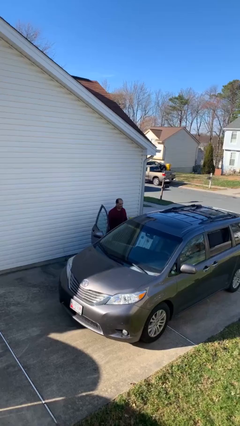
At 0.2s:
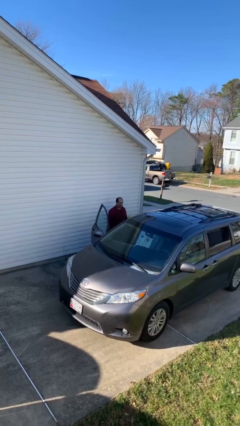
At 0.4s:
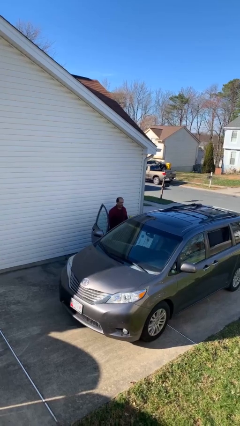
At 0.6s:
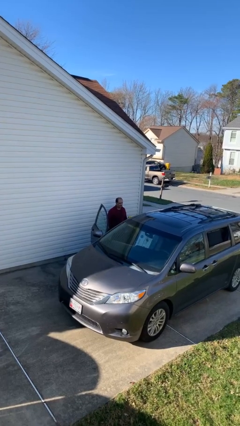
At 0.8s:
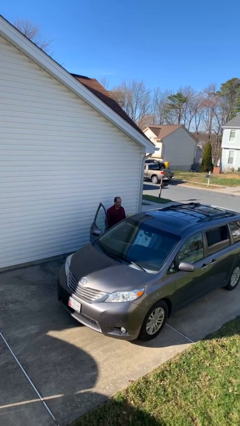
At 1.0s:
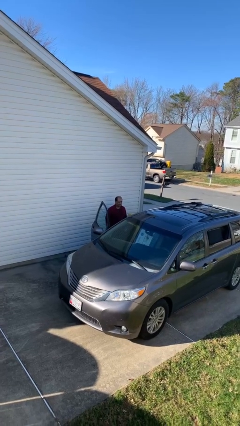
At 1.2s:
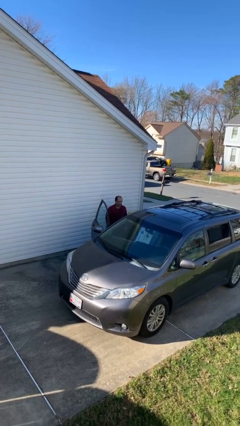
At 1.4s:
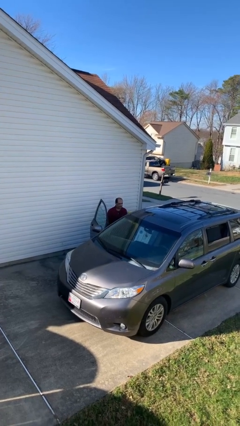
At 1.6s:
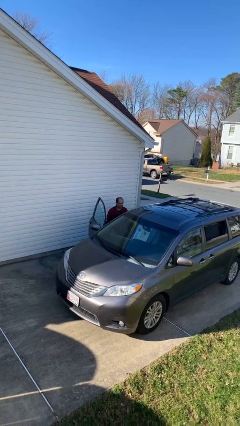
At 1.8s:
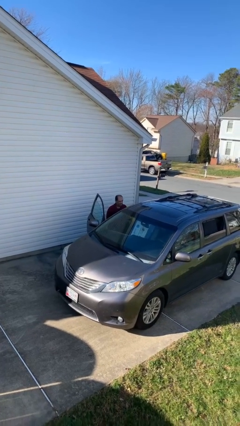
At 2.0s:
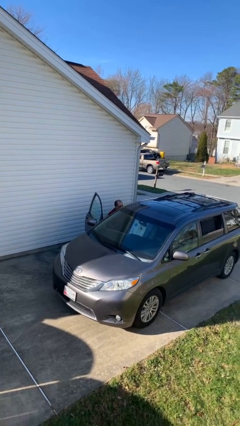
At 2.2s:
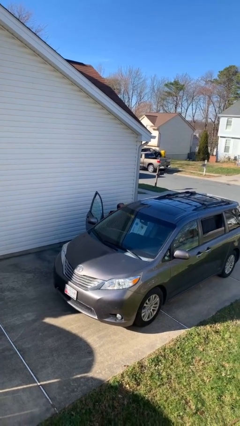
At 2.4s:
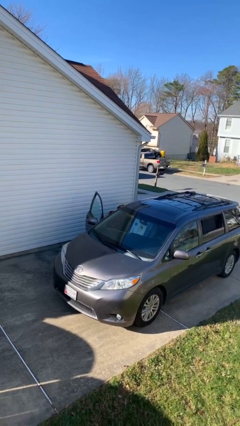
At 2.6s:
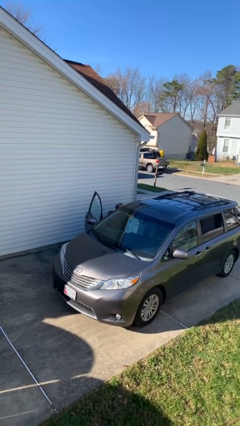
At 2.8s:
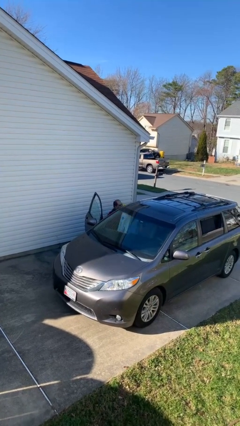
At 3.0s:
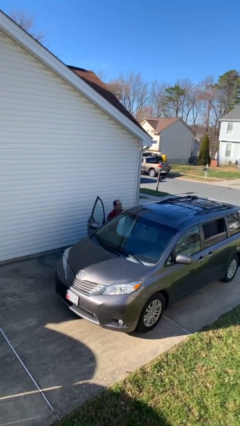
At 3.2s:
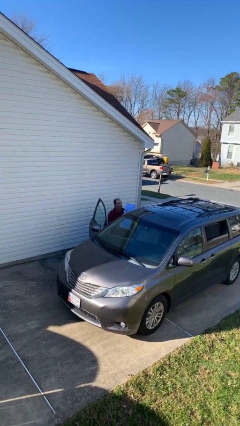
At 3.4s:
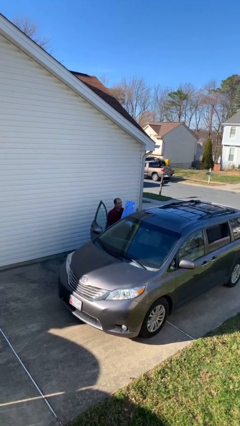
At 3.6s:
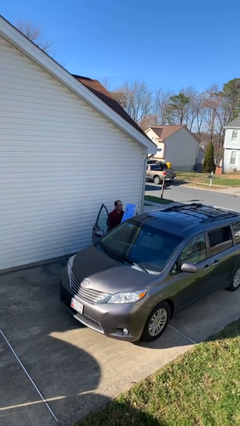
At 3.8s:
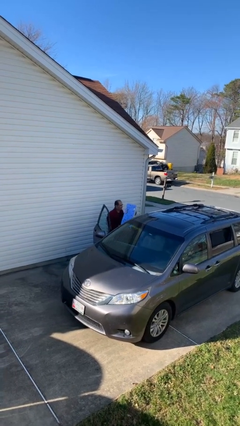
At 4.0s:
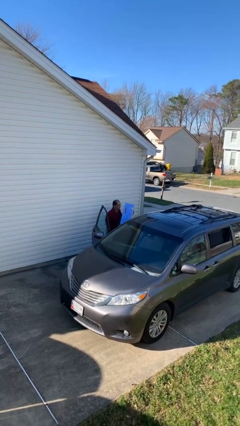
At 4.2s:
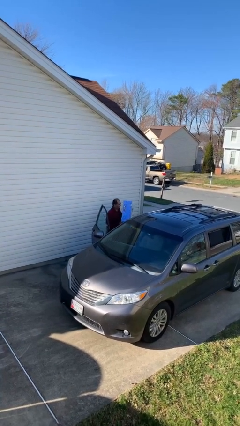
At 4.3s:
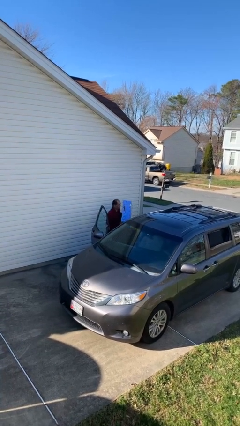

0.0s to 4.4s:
person unloads car

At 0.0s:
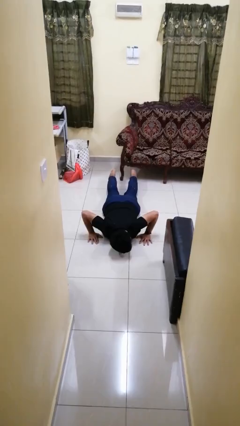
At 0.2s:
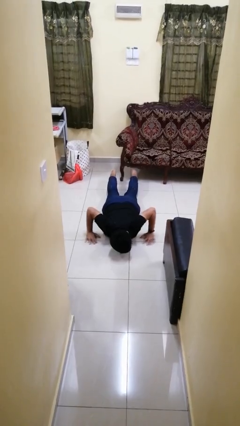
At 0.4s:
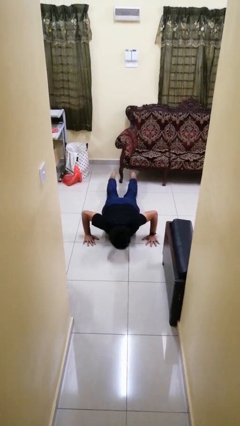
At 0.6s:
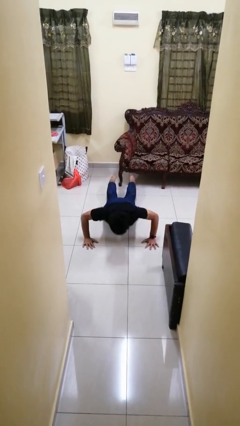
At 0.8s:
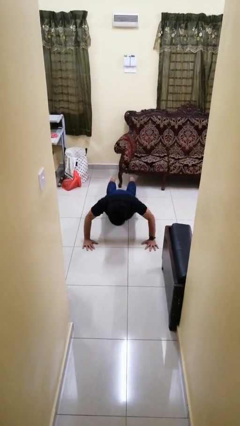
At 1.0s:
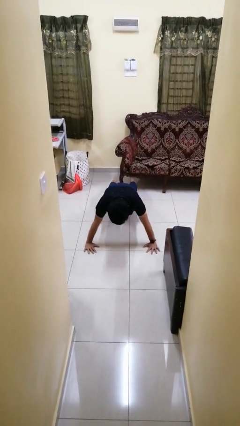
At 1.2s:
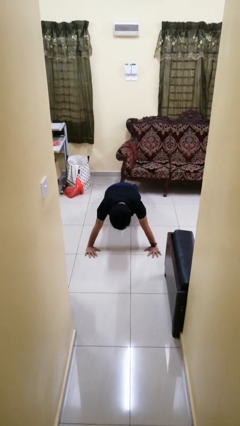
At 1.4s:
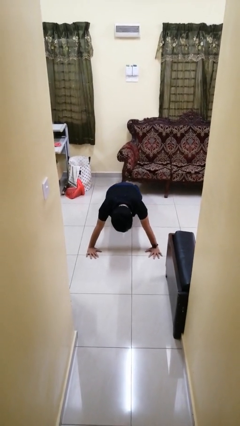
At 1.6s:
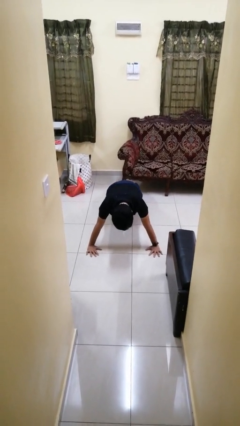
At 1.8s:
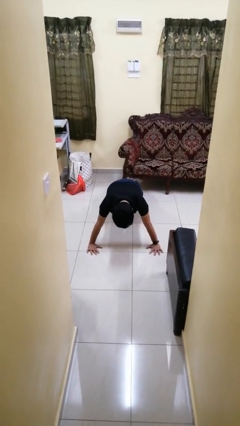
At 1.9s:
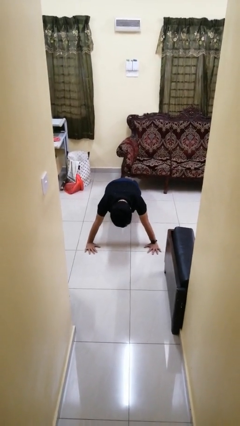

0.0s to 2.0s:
person exercises with pushup

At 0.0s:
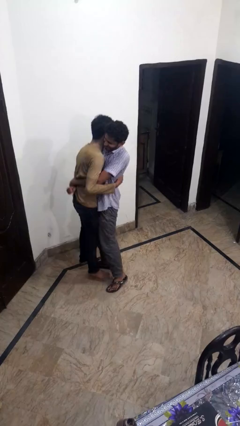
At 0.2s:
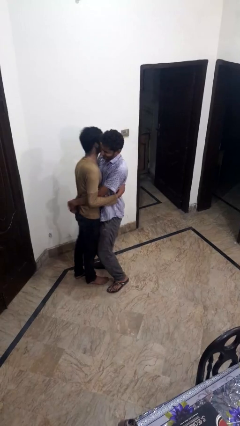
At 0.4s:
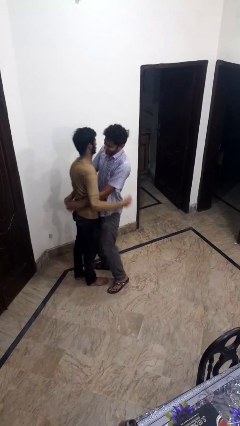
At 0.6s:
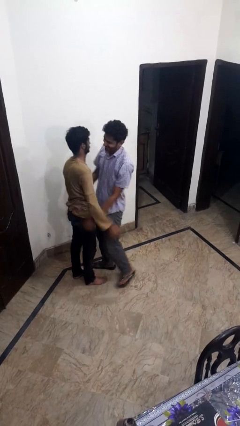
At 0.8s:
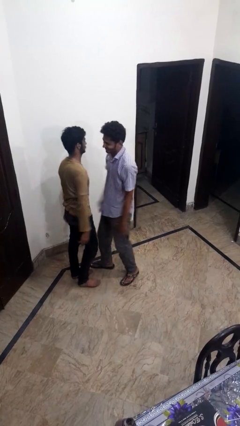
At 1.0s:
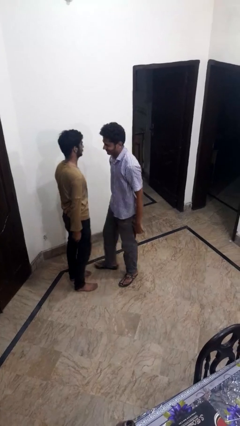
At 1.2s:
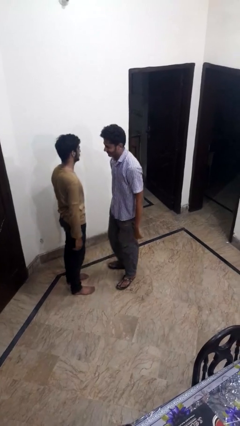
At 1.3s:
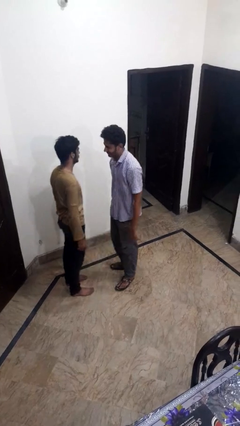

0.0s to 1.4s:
person puts down person

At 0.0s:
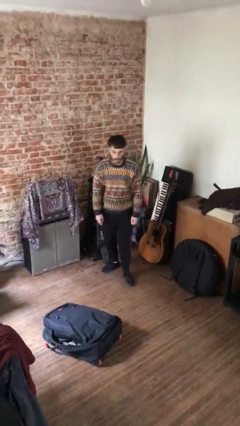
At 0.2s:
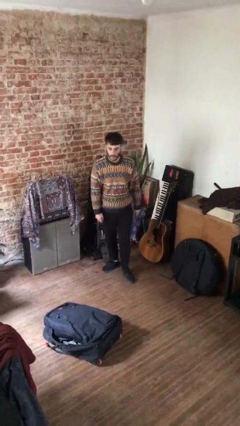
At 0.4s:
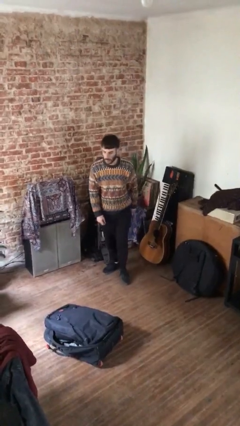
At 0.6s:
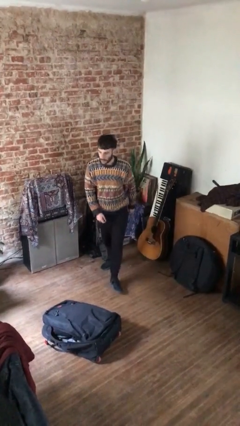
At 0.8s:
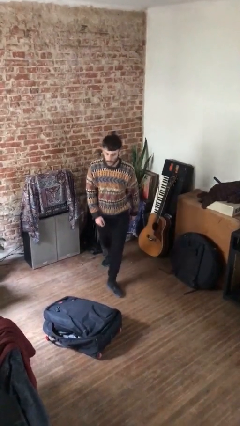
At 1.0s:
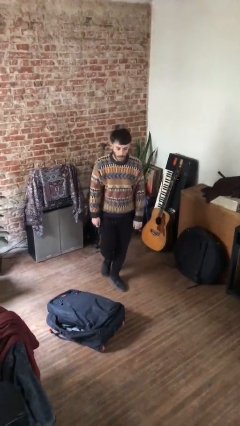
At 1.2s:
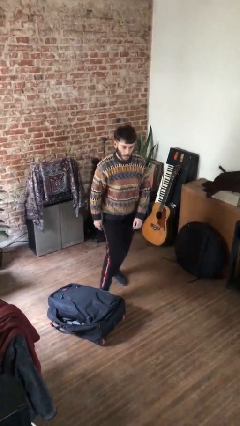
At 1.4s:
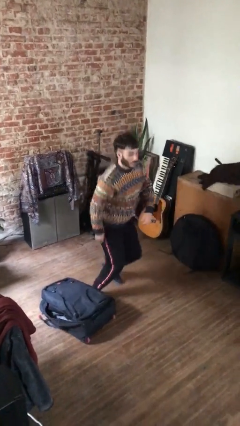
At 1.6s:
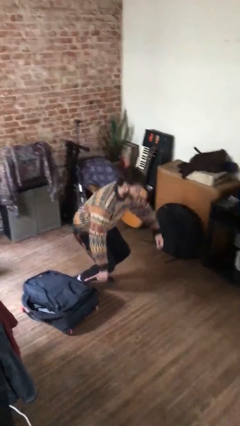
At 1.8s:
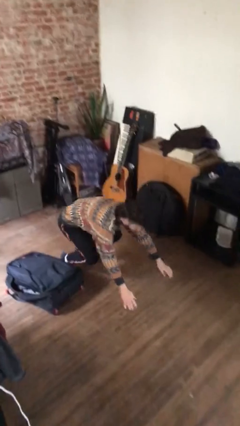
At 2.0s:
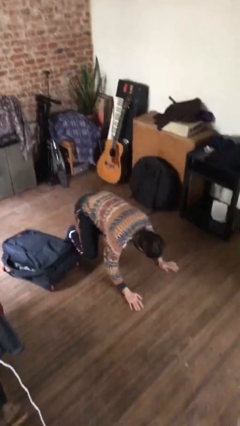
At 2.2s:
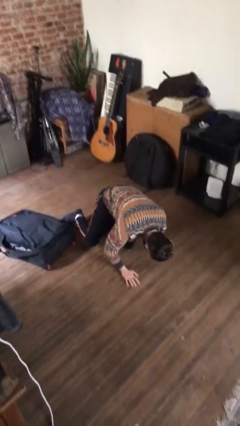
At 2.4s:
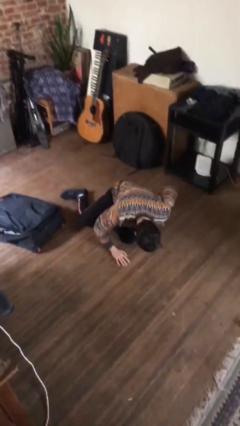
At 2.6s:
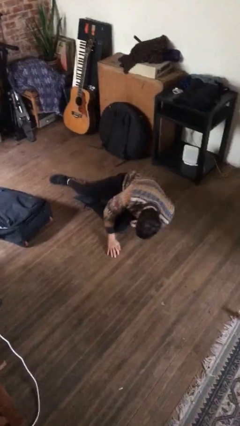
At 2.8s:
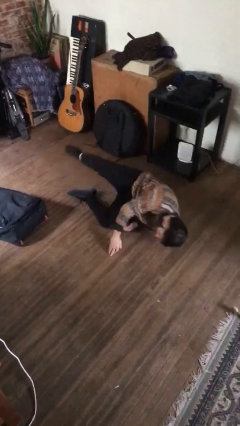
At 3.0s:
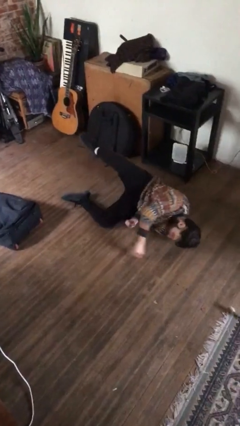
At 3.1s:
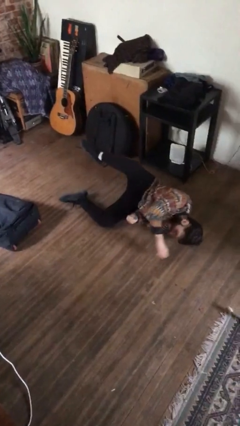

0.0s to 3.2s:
person trips on object on floor

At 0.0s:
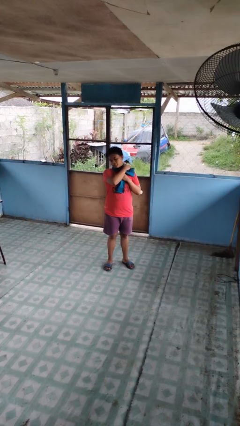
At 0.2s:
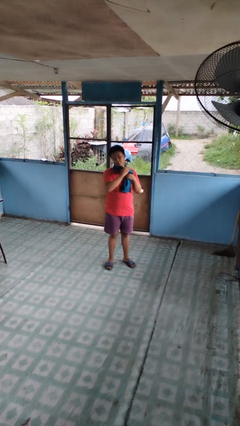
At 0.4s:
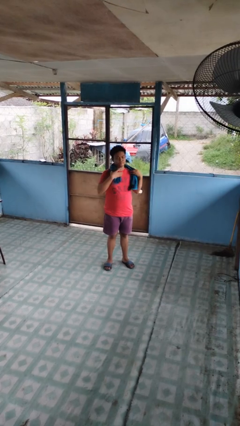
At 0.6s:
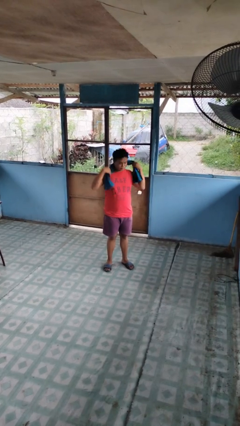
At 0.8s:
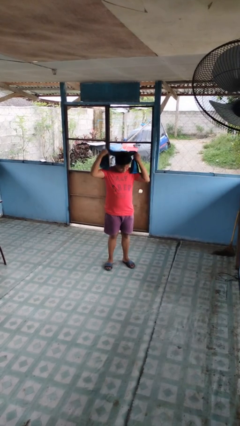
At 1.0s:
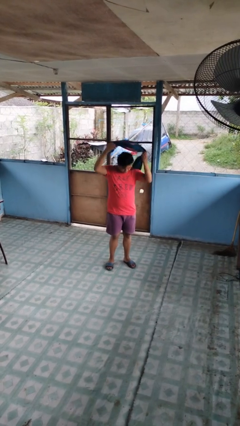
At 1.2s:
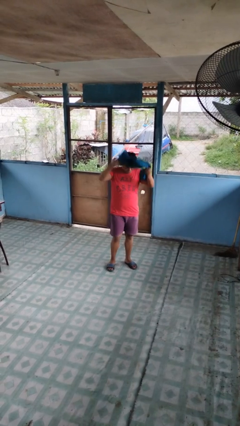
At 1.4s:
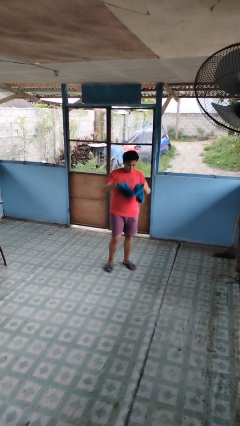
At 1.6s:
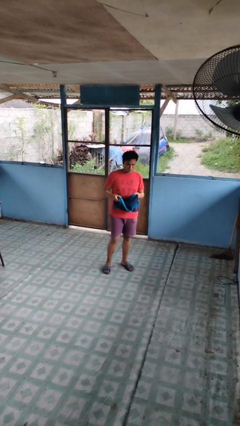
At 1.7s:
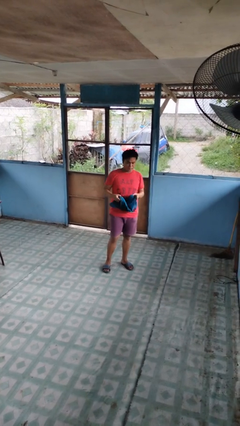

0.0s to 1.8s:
person takes off scarf

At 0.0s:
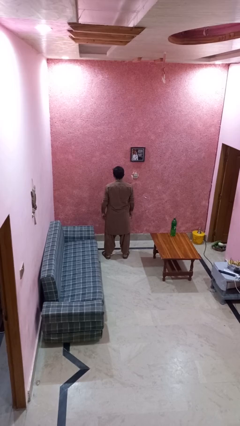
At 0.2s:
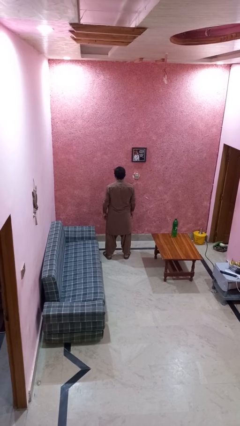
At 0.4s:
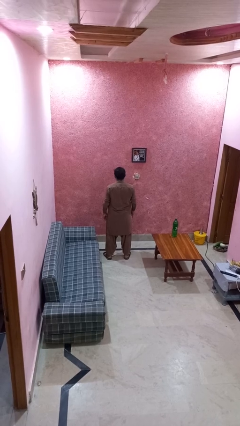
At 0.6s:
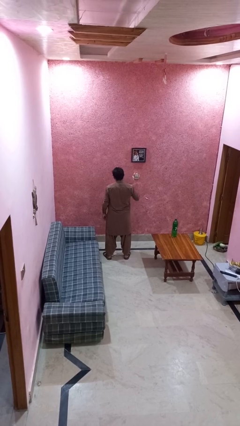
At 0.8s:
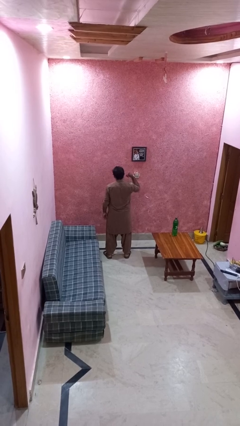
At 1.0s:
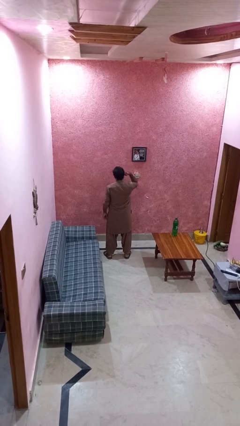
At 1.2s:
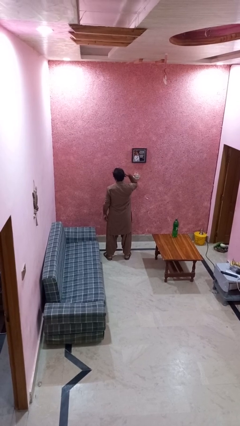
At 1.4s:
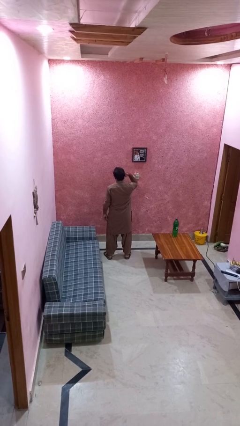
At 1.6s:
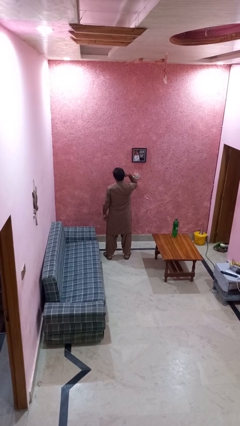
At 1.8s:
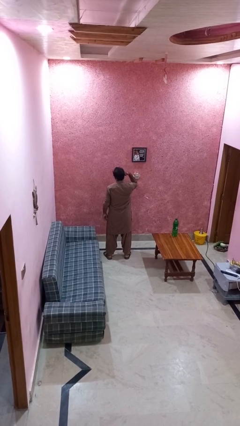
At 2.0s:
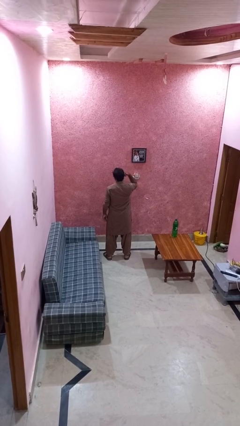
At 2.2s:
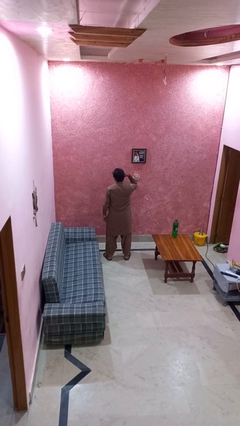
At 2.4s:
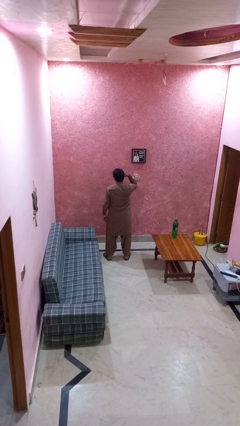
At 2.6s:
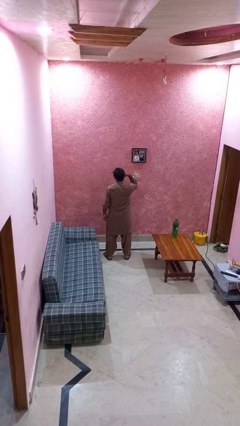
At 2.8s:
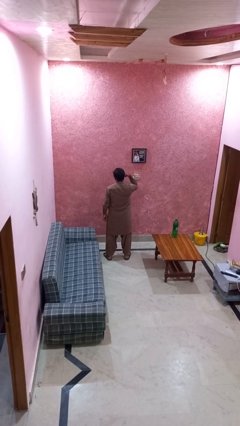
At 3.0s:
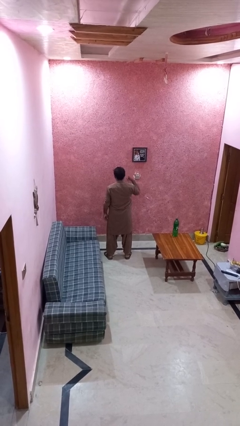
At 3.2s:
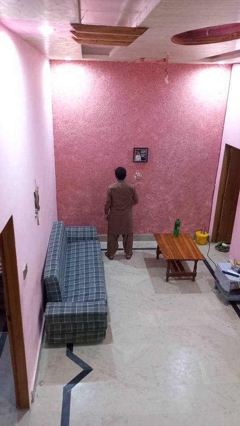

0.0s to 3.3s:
person gestures call me

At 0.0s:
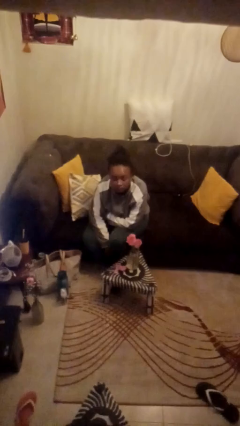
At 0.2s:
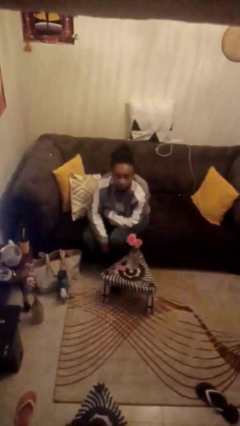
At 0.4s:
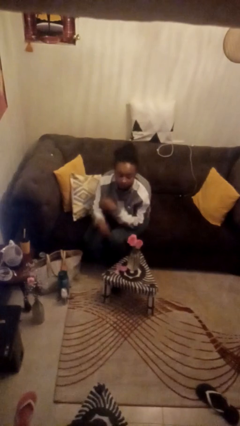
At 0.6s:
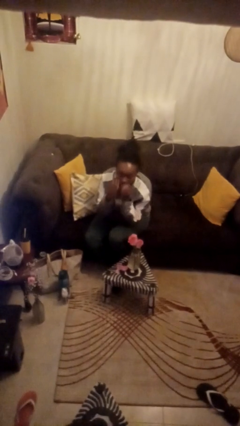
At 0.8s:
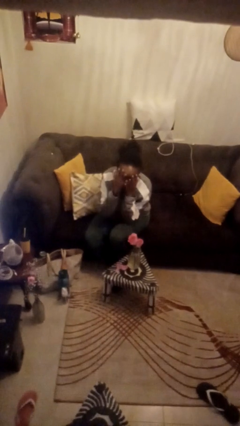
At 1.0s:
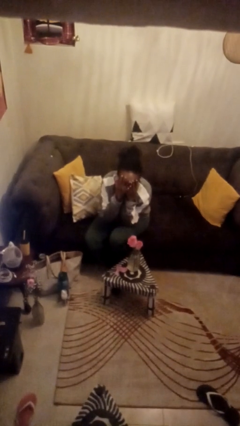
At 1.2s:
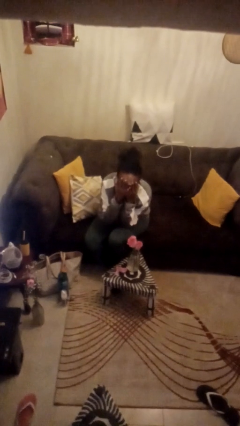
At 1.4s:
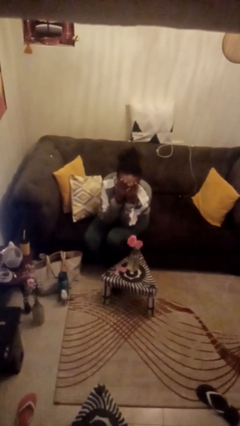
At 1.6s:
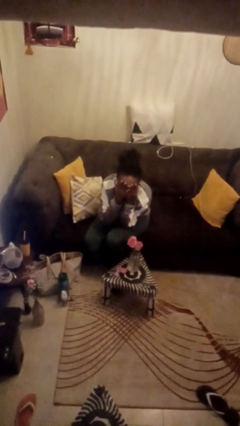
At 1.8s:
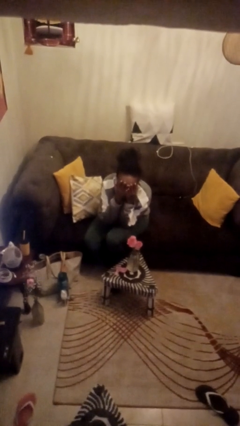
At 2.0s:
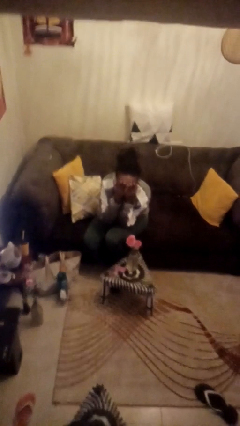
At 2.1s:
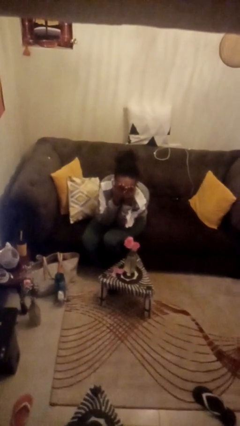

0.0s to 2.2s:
person covers face with hands
